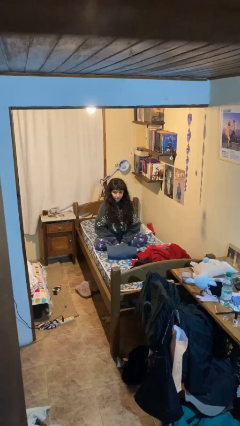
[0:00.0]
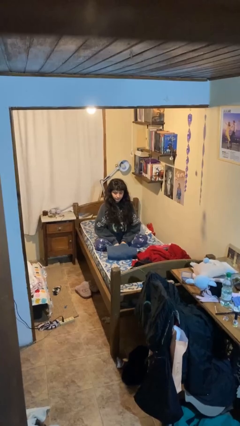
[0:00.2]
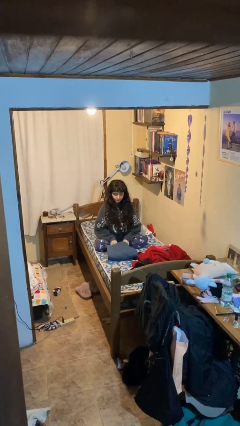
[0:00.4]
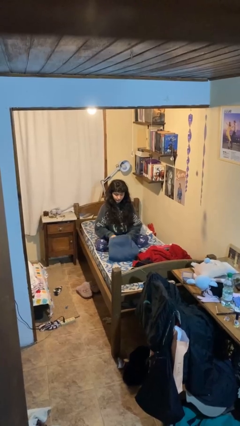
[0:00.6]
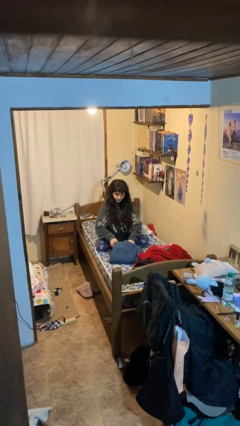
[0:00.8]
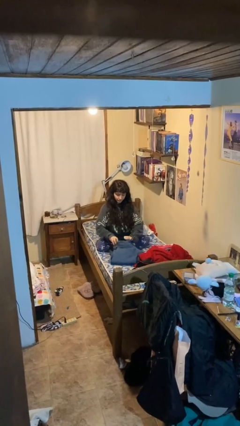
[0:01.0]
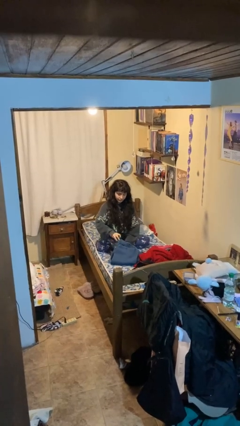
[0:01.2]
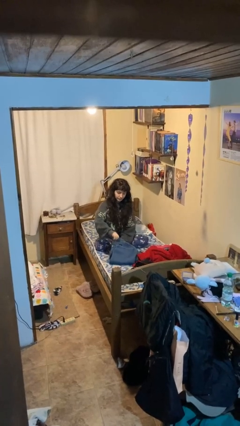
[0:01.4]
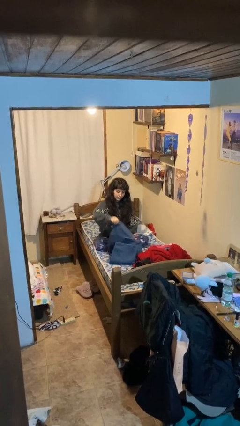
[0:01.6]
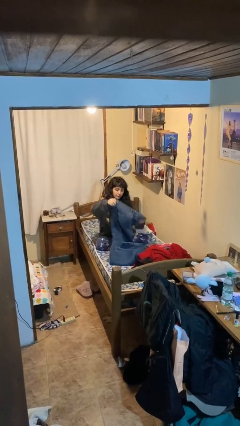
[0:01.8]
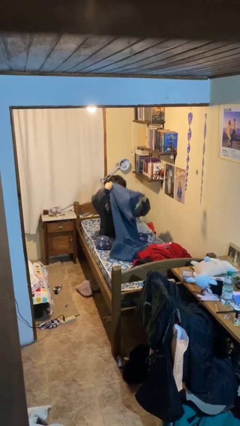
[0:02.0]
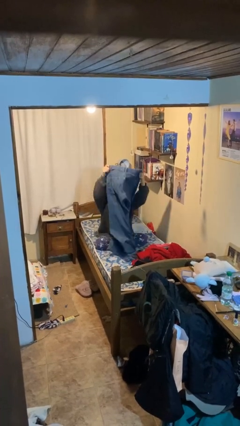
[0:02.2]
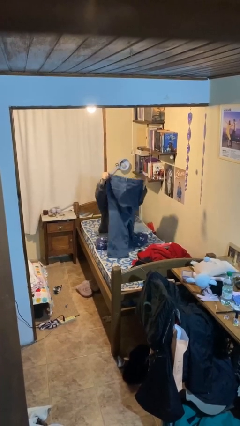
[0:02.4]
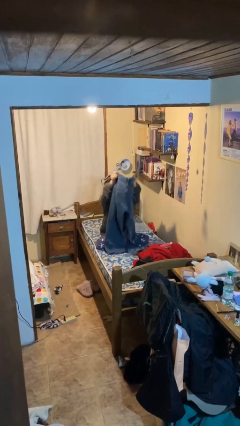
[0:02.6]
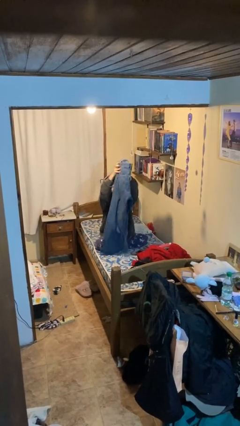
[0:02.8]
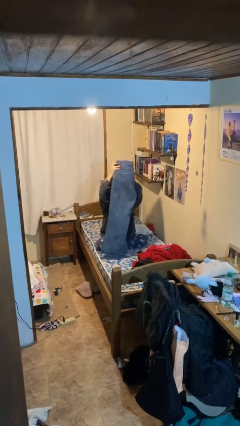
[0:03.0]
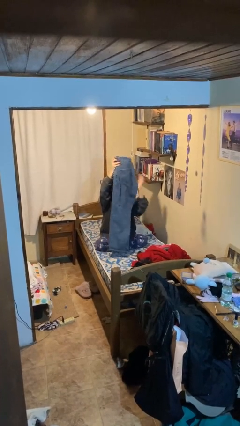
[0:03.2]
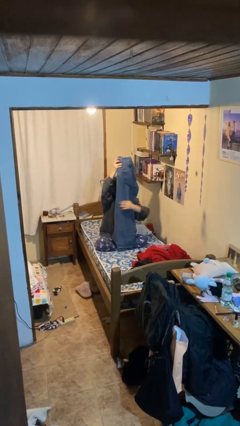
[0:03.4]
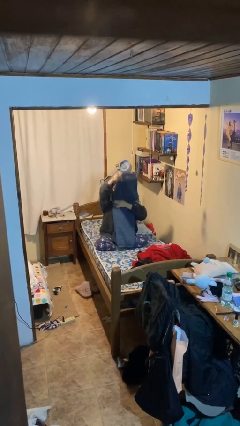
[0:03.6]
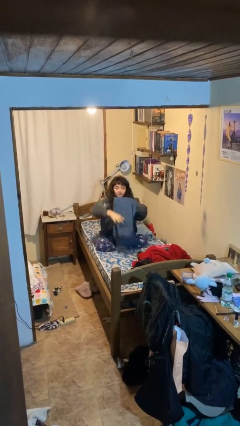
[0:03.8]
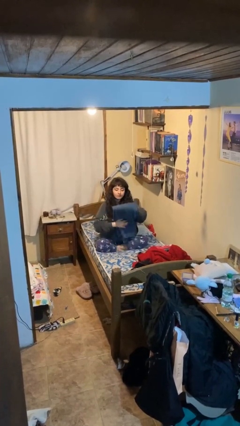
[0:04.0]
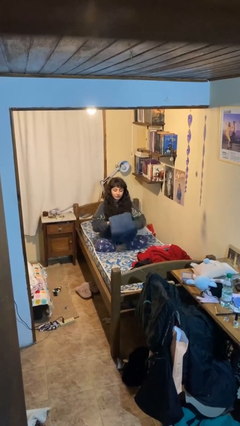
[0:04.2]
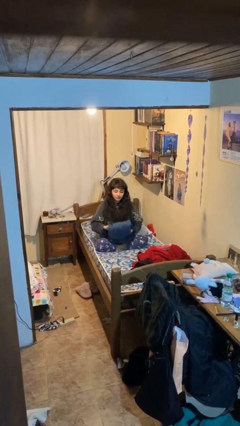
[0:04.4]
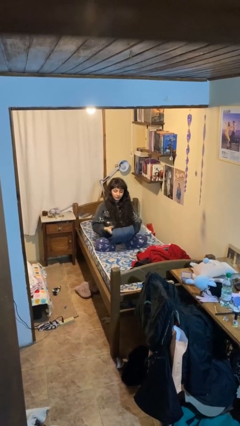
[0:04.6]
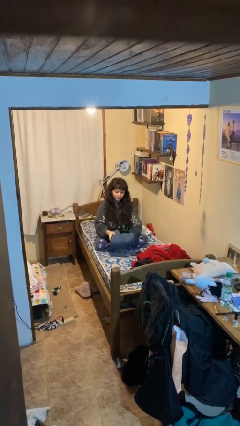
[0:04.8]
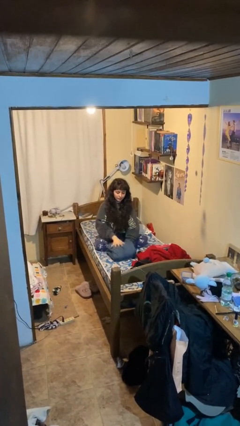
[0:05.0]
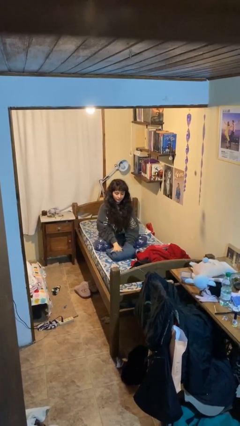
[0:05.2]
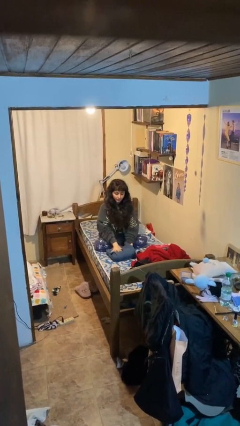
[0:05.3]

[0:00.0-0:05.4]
person folds pants

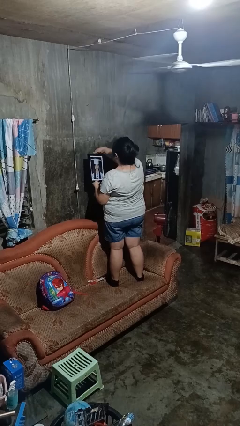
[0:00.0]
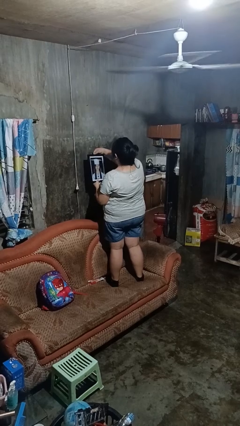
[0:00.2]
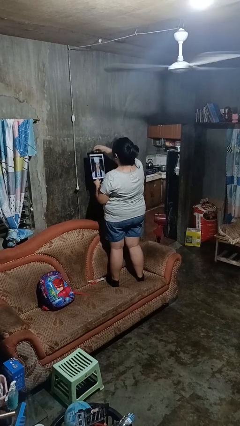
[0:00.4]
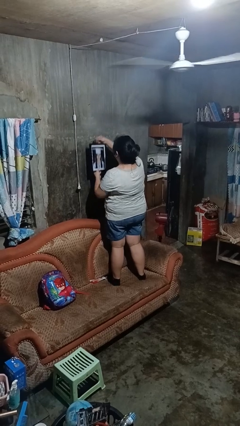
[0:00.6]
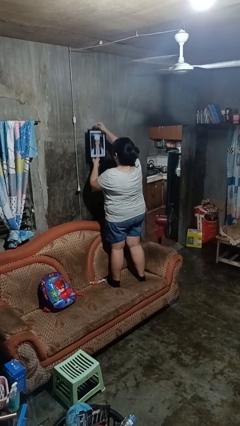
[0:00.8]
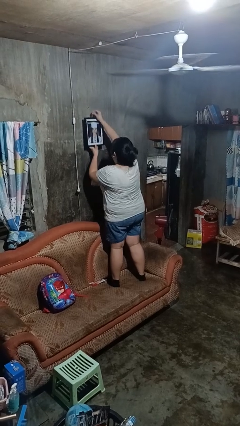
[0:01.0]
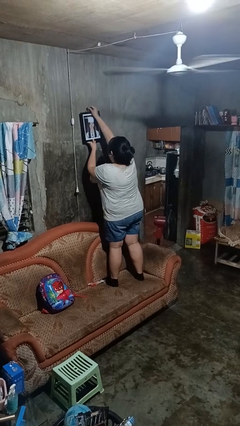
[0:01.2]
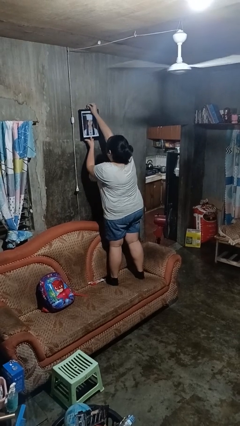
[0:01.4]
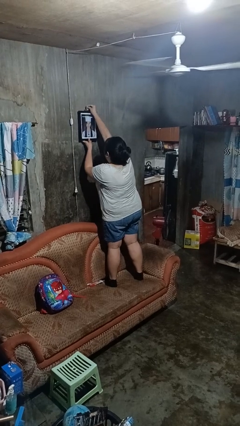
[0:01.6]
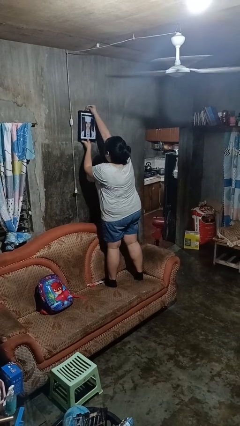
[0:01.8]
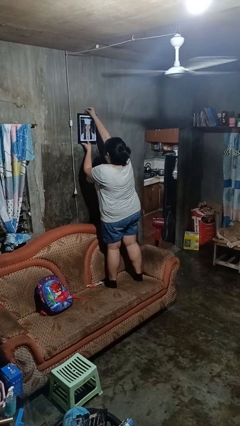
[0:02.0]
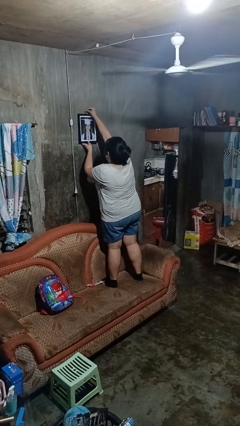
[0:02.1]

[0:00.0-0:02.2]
person puts up picture frame

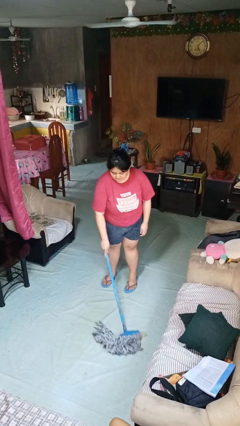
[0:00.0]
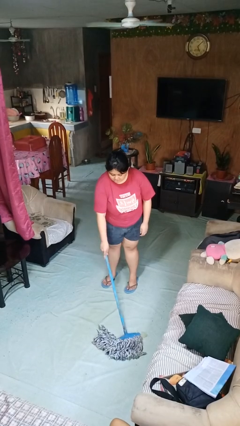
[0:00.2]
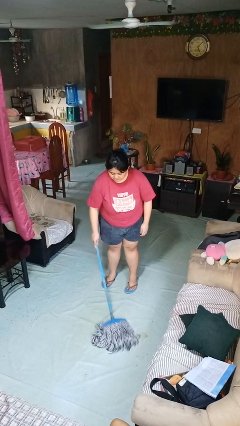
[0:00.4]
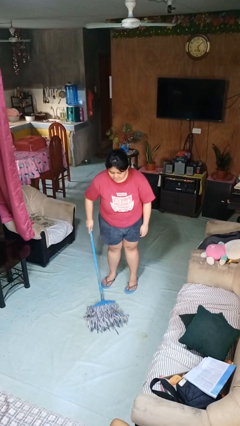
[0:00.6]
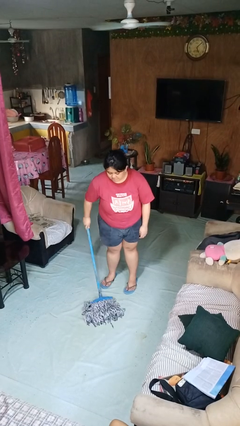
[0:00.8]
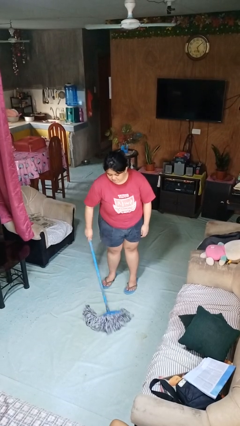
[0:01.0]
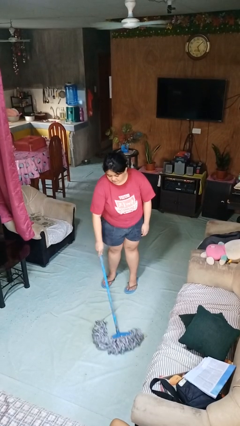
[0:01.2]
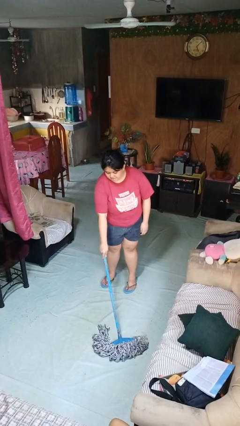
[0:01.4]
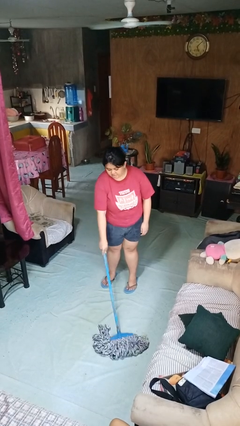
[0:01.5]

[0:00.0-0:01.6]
person mops

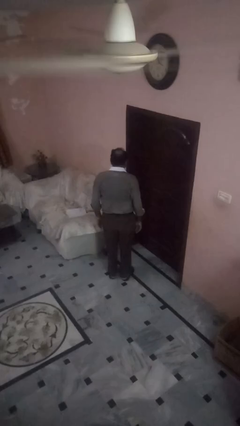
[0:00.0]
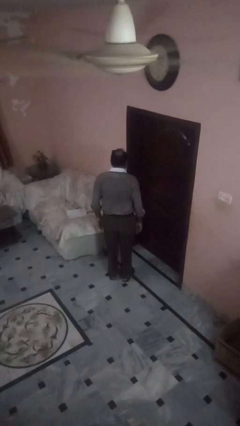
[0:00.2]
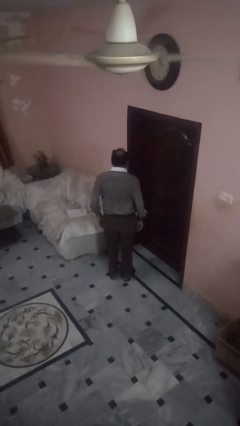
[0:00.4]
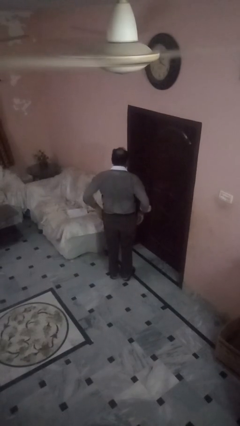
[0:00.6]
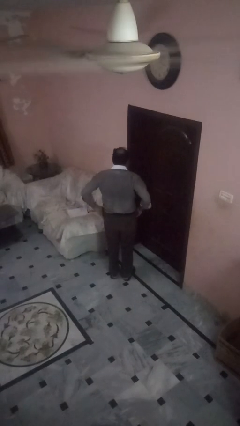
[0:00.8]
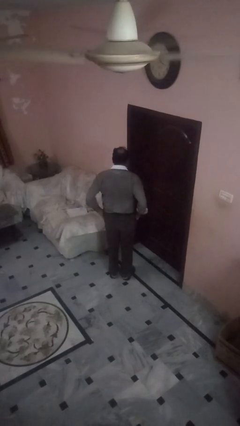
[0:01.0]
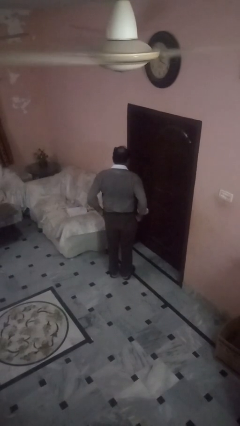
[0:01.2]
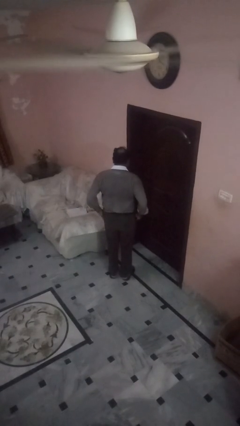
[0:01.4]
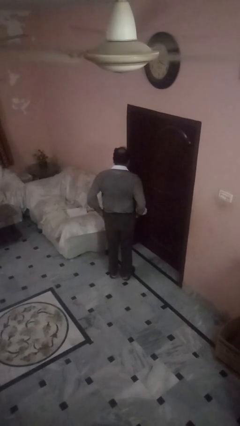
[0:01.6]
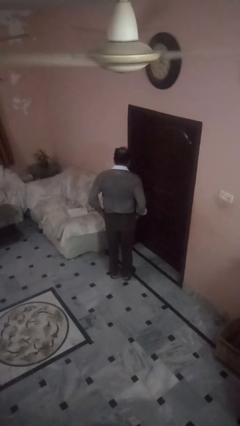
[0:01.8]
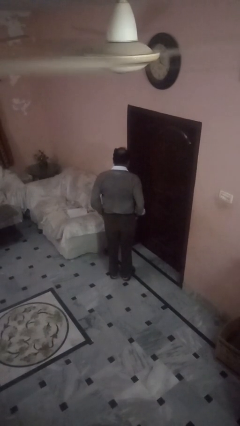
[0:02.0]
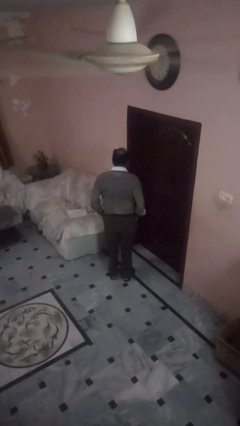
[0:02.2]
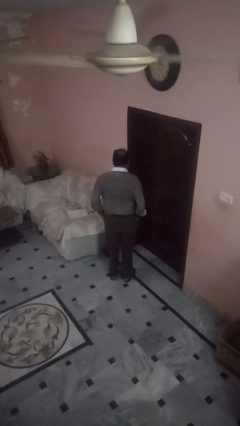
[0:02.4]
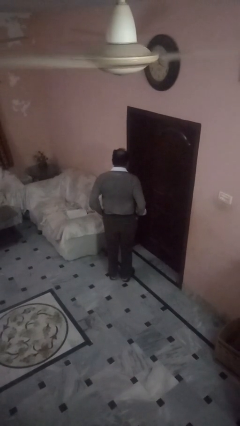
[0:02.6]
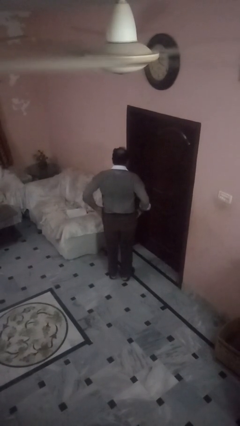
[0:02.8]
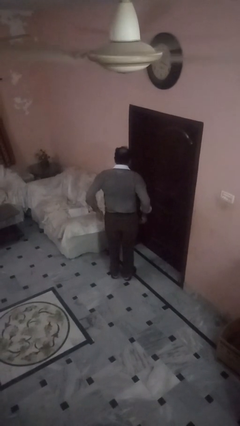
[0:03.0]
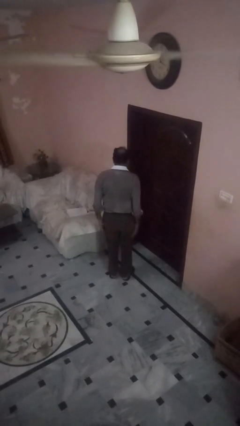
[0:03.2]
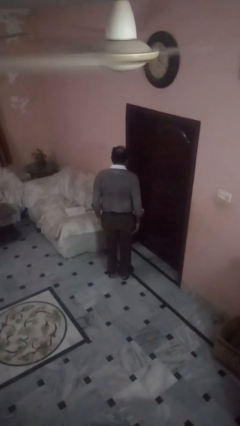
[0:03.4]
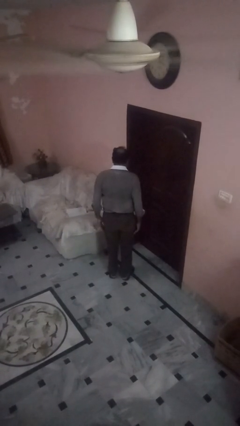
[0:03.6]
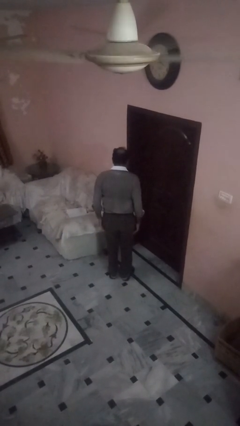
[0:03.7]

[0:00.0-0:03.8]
person puts hands in back pockets

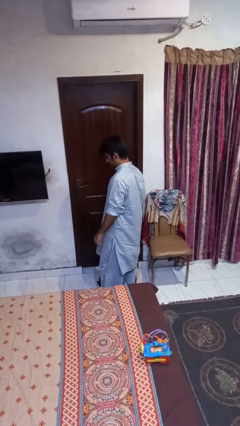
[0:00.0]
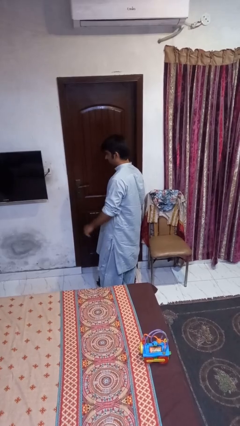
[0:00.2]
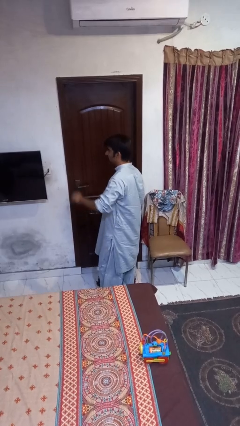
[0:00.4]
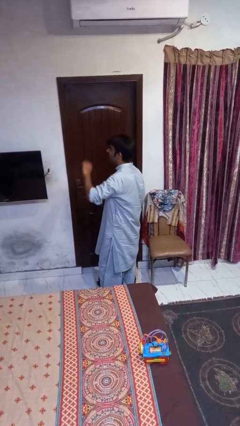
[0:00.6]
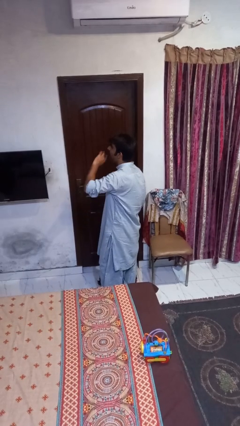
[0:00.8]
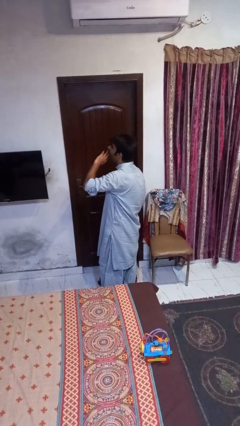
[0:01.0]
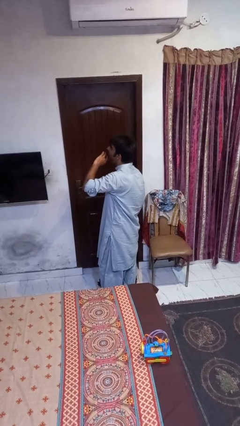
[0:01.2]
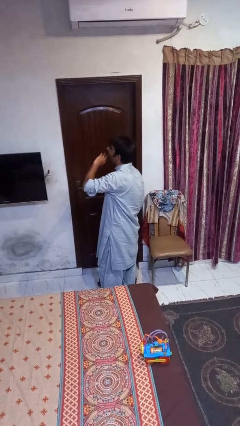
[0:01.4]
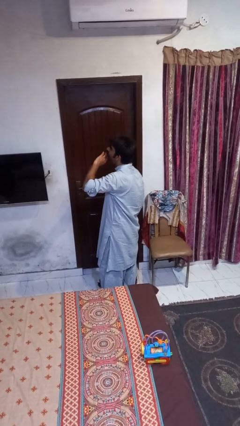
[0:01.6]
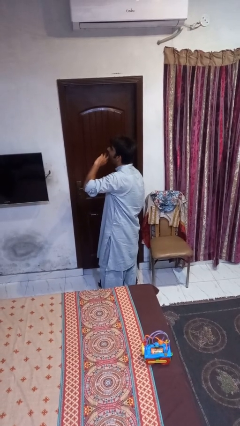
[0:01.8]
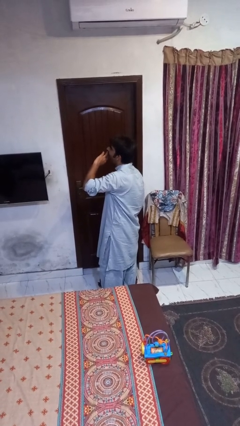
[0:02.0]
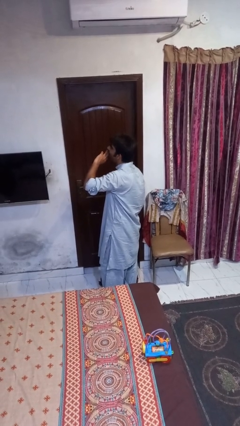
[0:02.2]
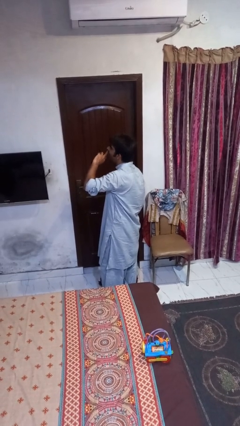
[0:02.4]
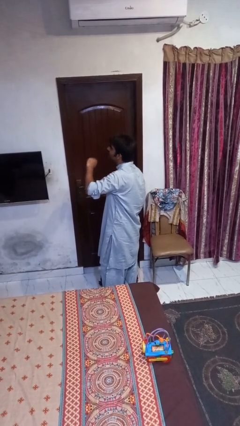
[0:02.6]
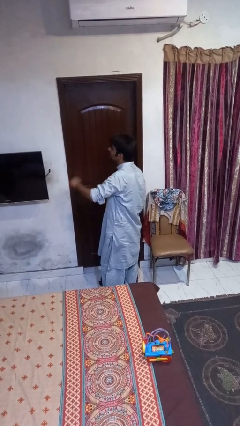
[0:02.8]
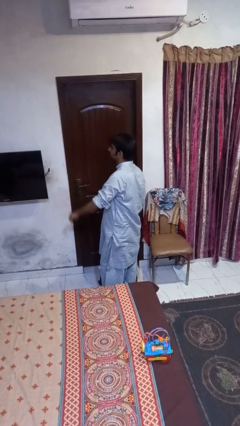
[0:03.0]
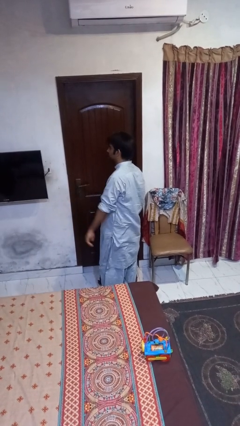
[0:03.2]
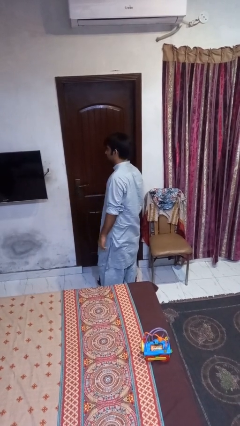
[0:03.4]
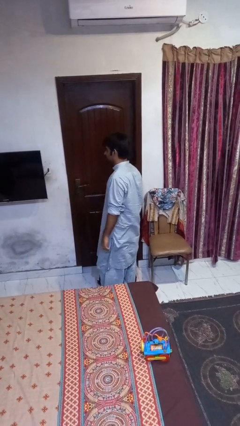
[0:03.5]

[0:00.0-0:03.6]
person yawns

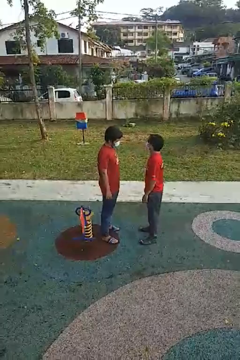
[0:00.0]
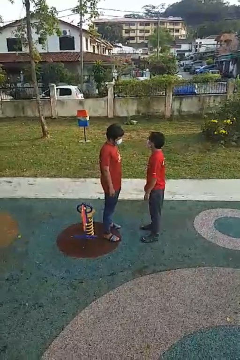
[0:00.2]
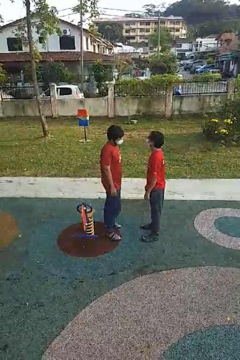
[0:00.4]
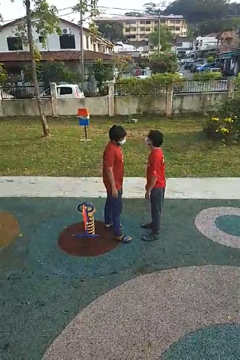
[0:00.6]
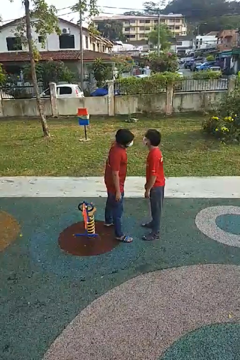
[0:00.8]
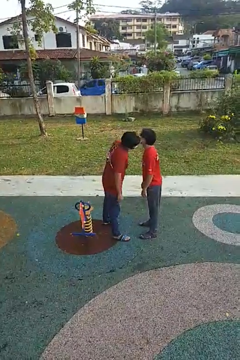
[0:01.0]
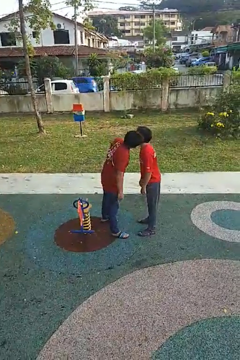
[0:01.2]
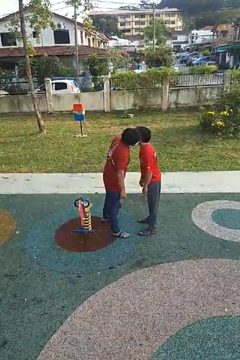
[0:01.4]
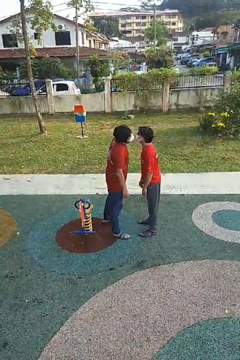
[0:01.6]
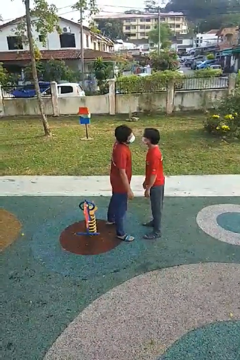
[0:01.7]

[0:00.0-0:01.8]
person kisses cheek of person
